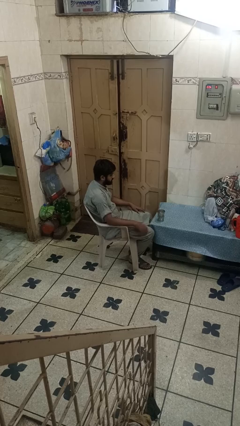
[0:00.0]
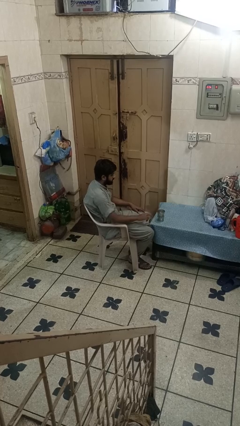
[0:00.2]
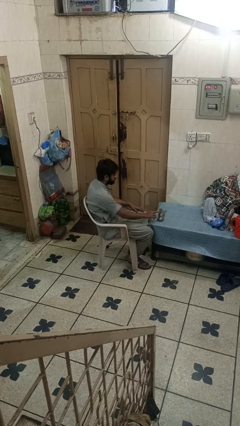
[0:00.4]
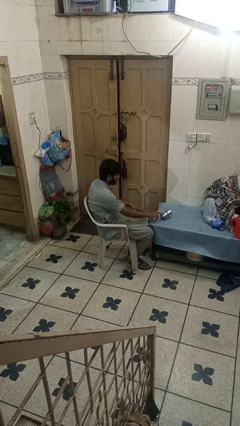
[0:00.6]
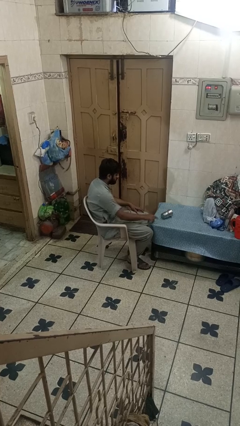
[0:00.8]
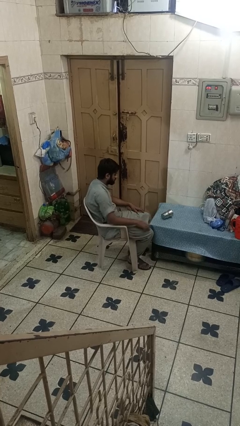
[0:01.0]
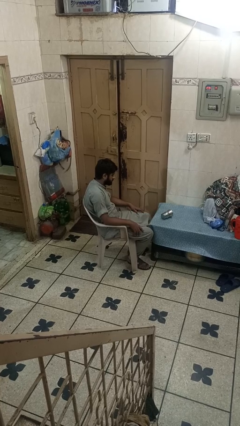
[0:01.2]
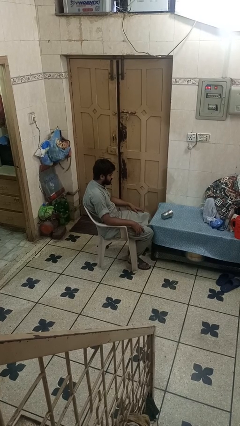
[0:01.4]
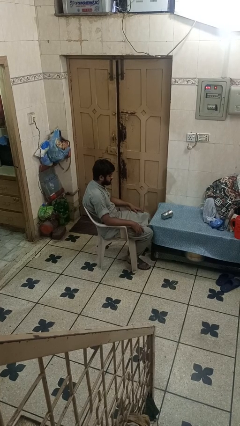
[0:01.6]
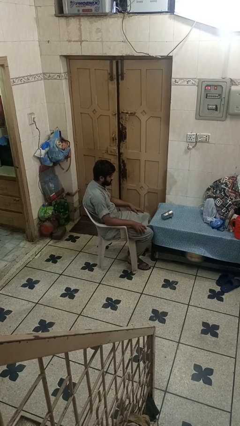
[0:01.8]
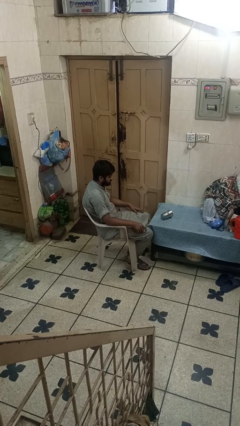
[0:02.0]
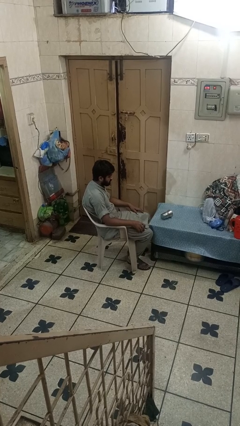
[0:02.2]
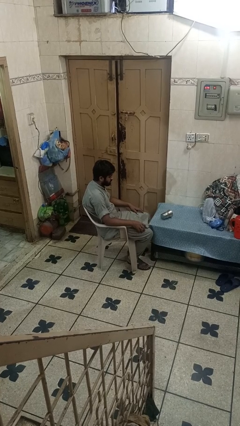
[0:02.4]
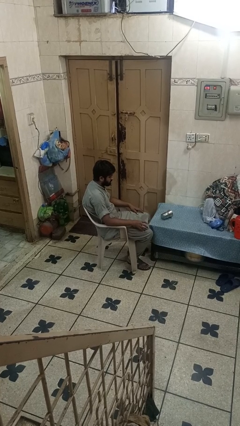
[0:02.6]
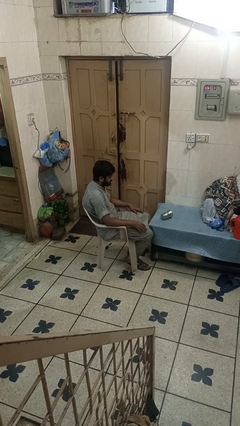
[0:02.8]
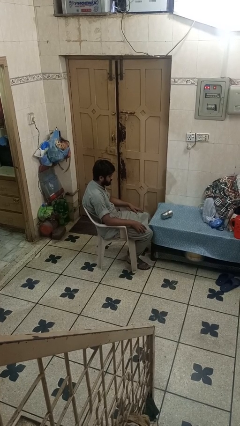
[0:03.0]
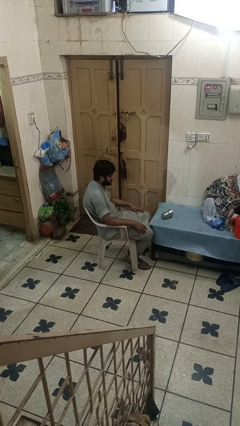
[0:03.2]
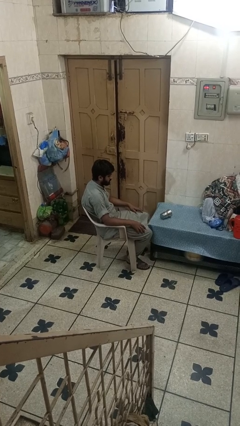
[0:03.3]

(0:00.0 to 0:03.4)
person knocks over glass

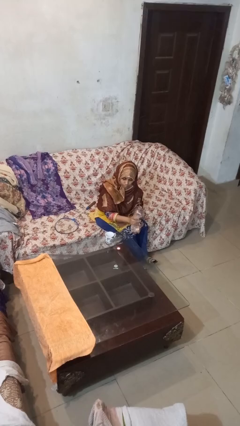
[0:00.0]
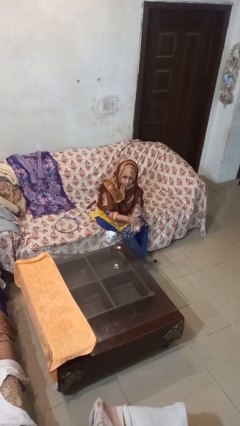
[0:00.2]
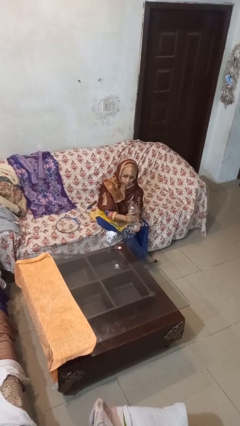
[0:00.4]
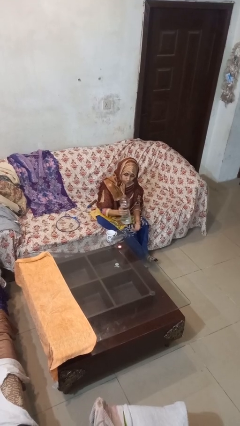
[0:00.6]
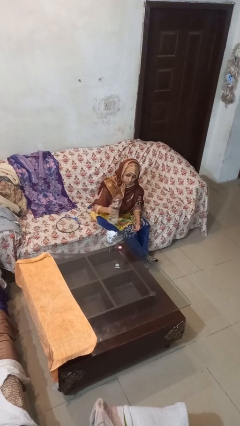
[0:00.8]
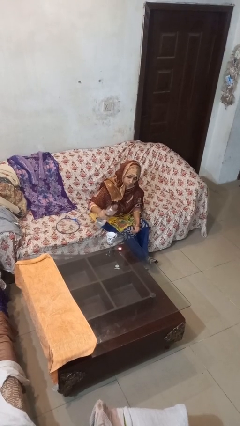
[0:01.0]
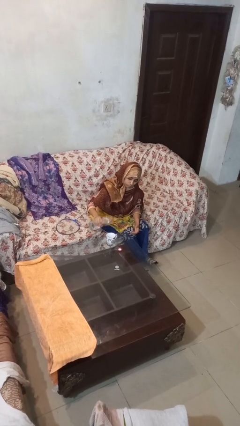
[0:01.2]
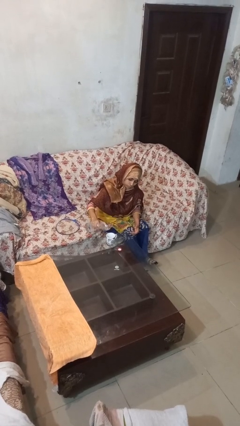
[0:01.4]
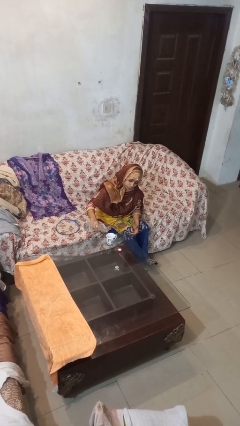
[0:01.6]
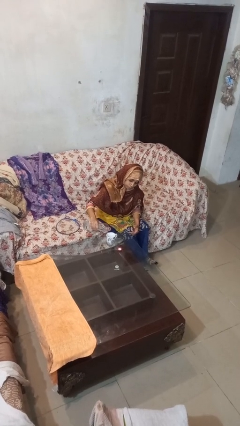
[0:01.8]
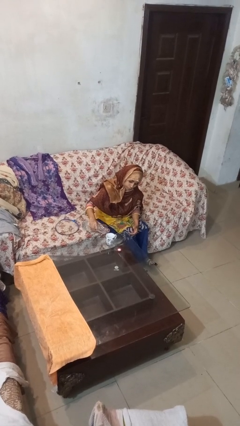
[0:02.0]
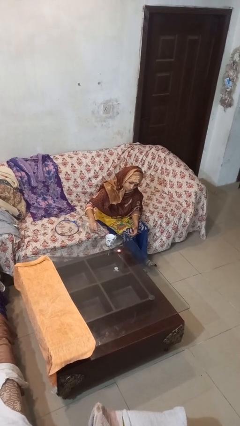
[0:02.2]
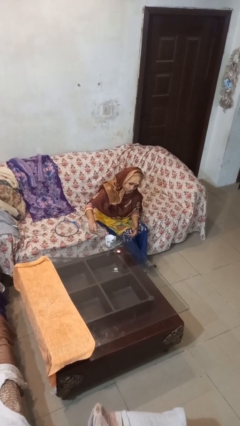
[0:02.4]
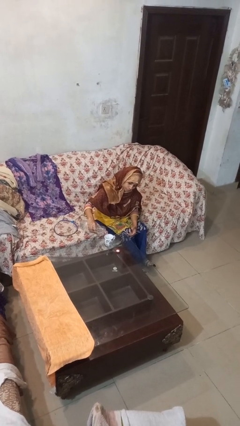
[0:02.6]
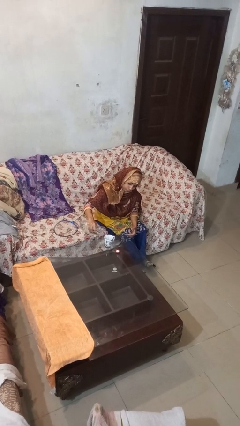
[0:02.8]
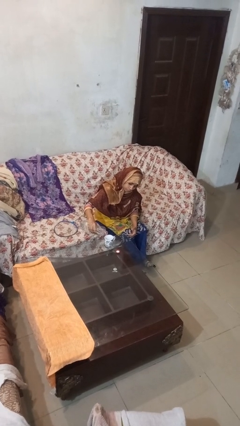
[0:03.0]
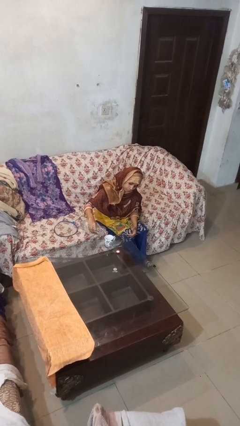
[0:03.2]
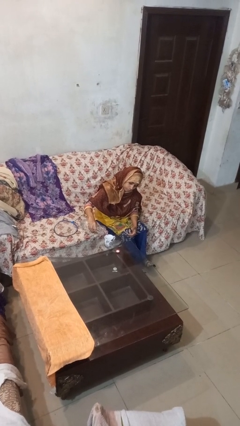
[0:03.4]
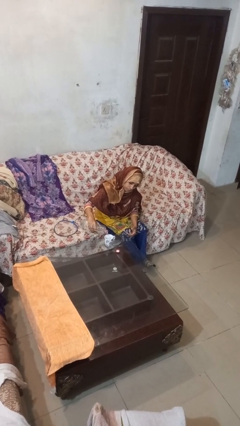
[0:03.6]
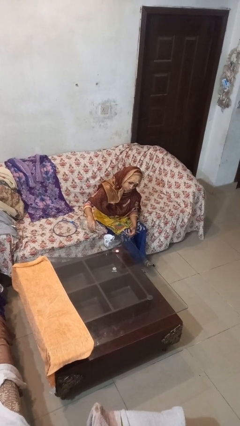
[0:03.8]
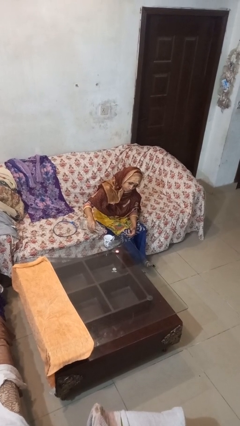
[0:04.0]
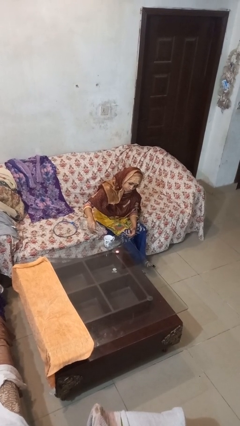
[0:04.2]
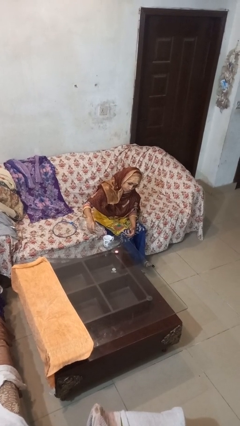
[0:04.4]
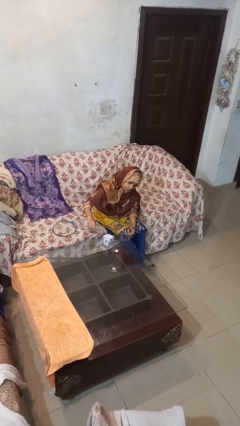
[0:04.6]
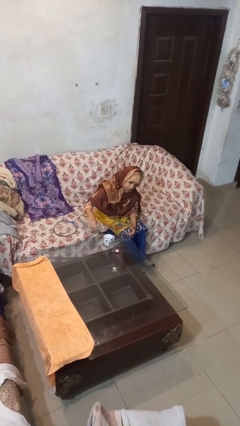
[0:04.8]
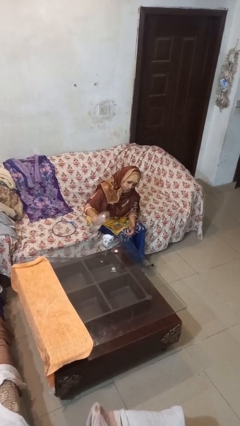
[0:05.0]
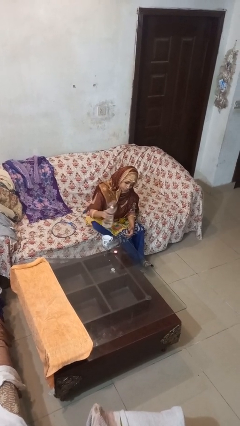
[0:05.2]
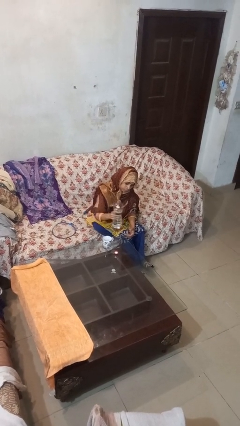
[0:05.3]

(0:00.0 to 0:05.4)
person pours liquid into cup

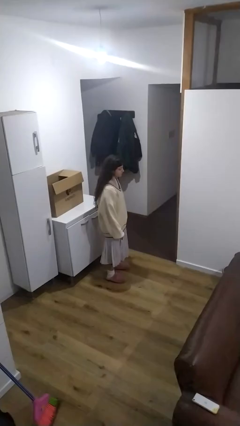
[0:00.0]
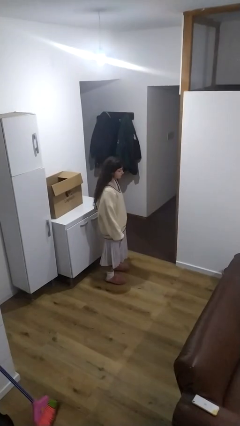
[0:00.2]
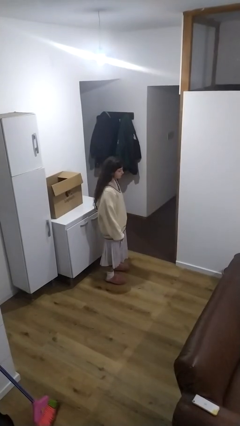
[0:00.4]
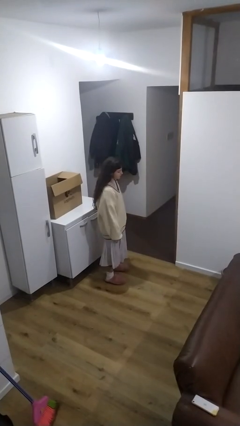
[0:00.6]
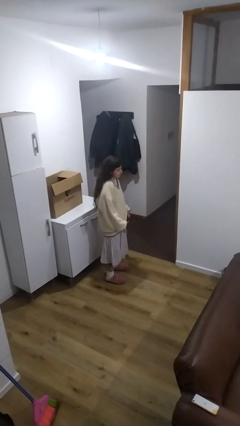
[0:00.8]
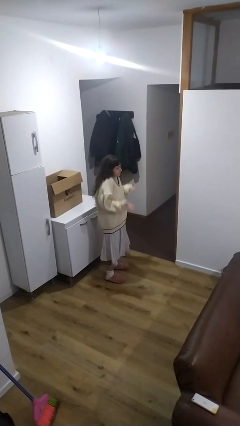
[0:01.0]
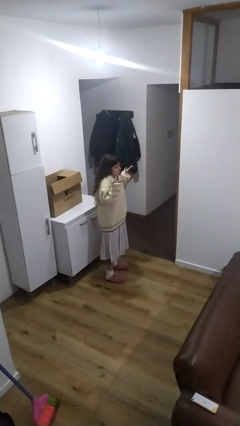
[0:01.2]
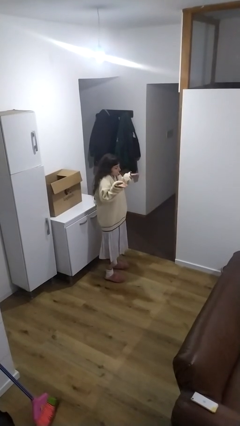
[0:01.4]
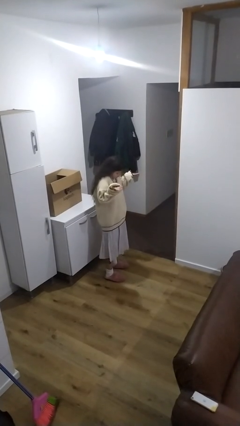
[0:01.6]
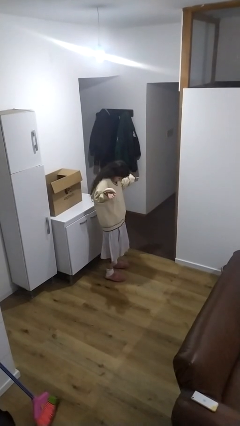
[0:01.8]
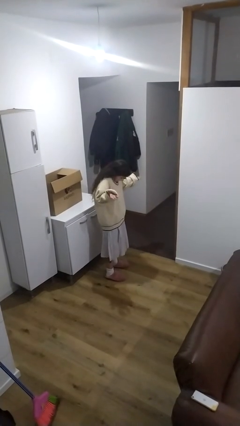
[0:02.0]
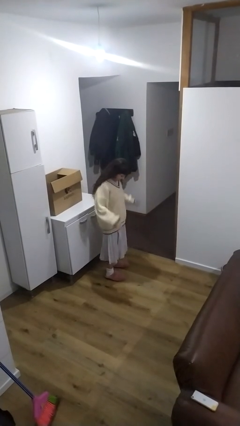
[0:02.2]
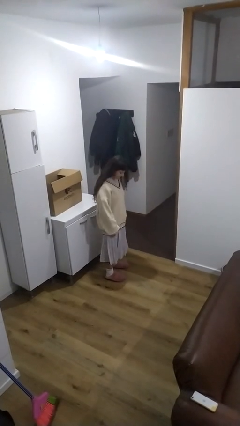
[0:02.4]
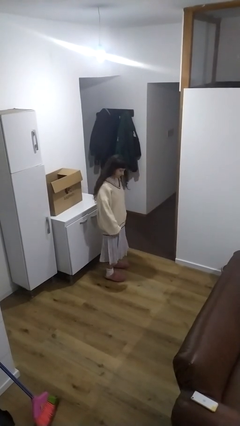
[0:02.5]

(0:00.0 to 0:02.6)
person shrugs

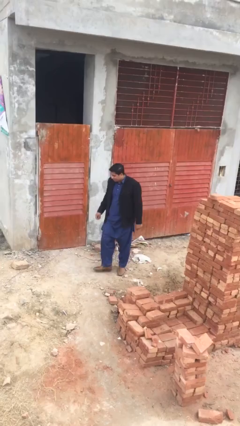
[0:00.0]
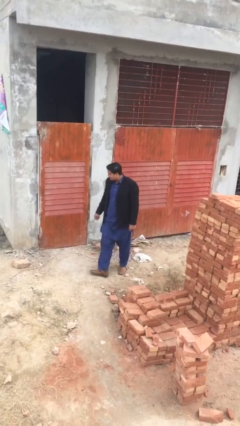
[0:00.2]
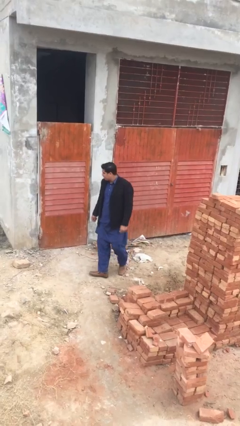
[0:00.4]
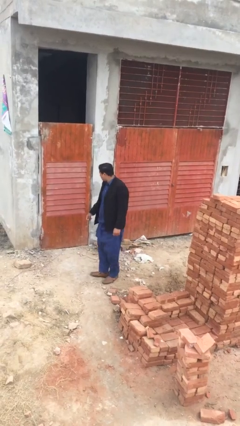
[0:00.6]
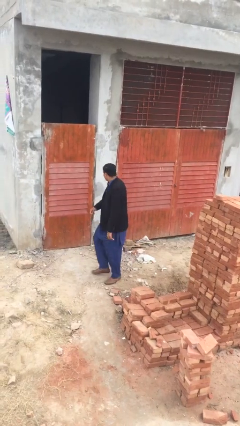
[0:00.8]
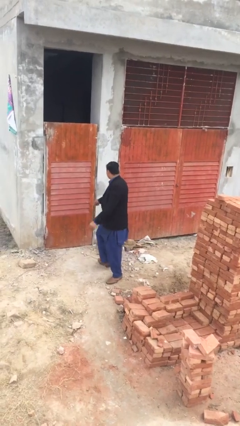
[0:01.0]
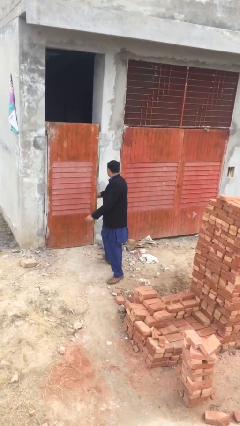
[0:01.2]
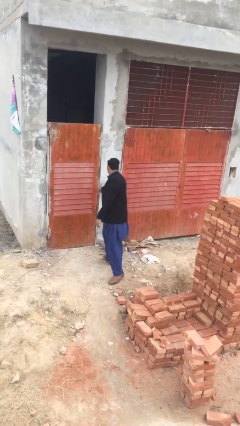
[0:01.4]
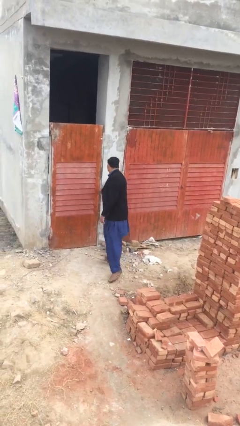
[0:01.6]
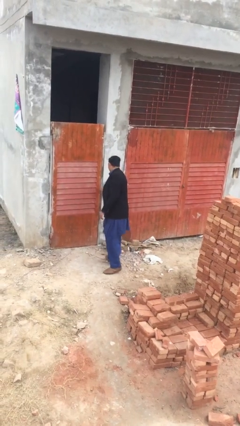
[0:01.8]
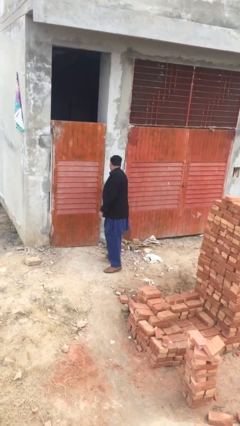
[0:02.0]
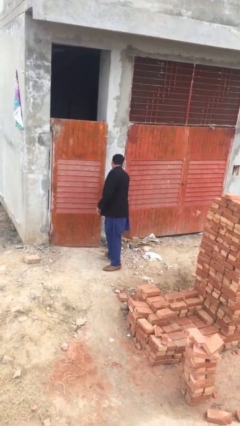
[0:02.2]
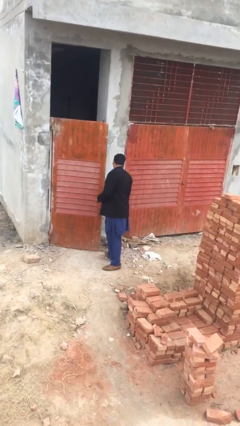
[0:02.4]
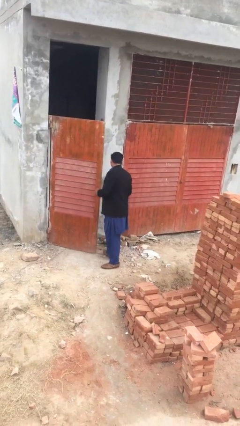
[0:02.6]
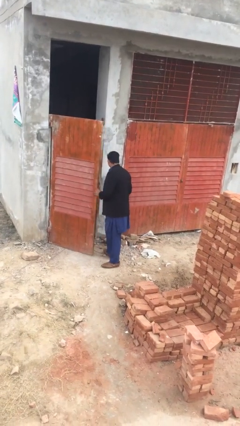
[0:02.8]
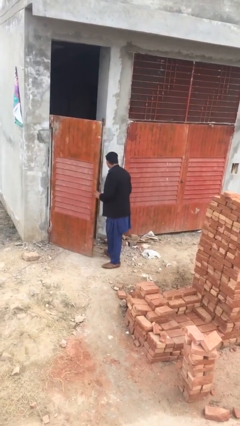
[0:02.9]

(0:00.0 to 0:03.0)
person opens facility door

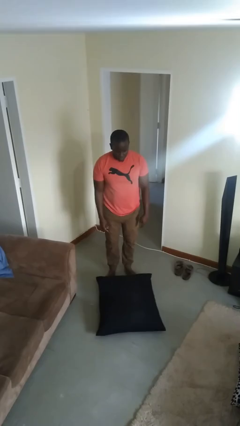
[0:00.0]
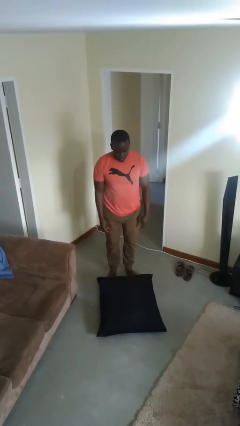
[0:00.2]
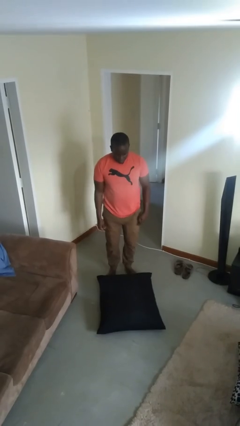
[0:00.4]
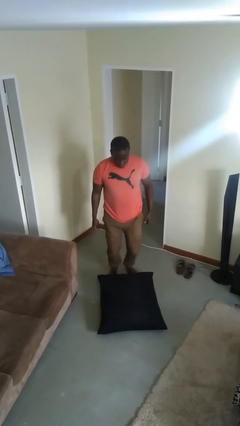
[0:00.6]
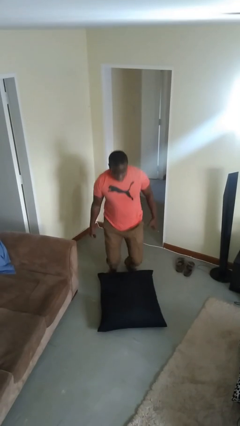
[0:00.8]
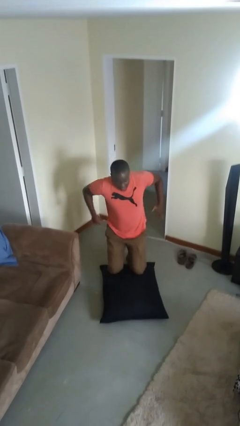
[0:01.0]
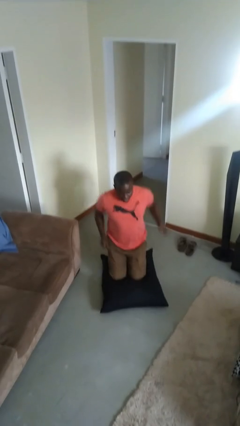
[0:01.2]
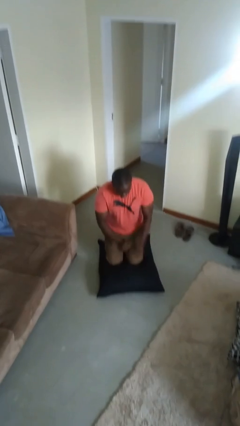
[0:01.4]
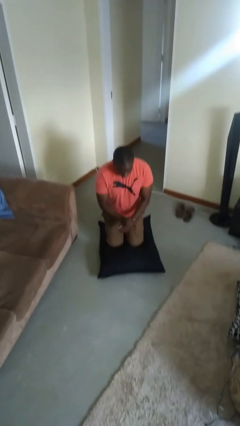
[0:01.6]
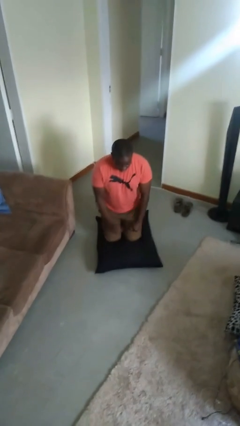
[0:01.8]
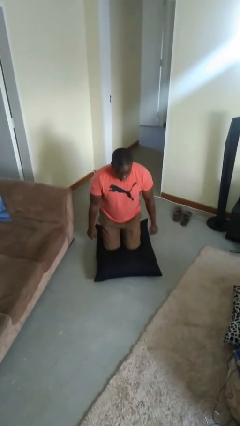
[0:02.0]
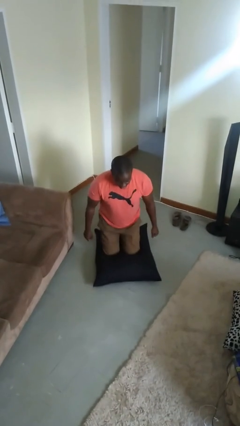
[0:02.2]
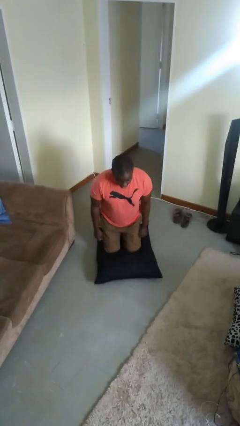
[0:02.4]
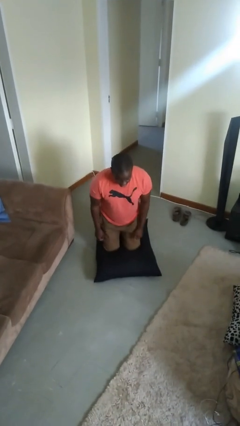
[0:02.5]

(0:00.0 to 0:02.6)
person trips on object on floor

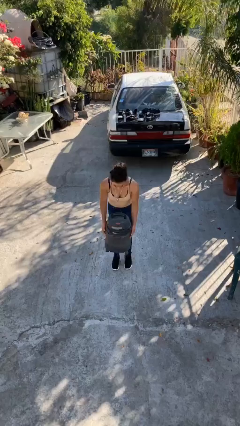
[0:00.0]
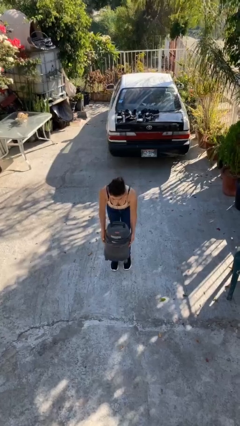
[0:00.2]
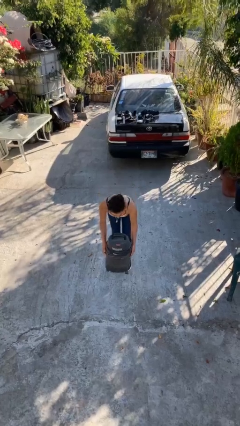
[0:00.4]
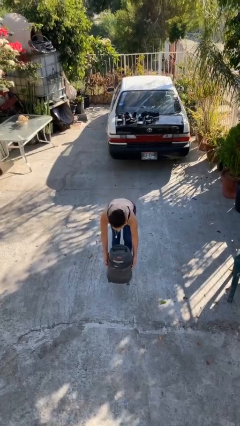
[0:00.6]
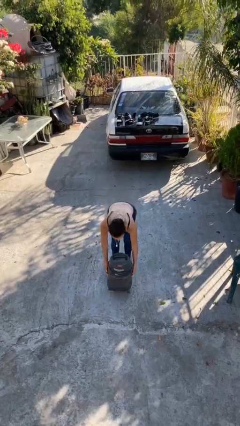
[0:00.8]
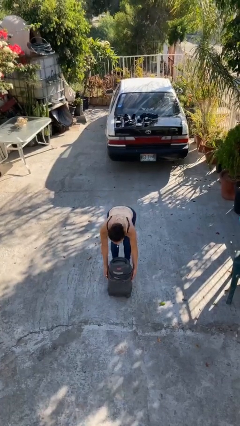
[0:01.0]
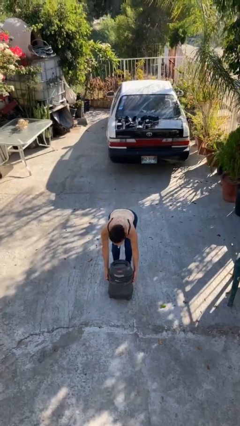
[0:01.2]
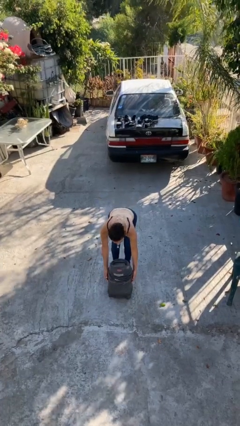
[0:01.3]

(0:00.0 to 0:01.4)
person puts down object on floor
